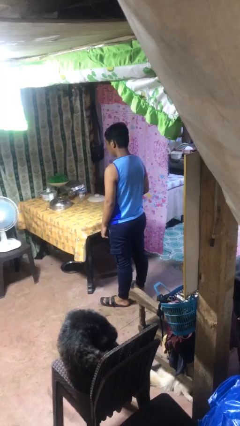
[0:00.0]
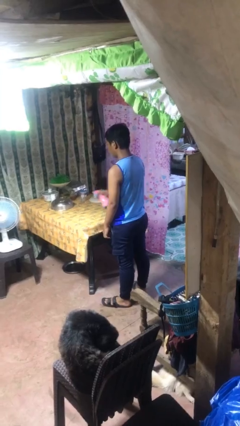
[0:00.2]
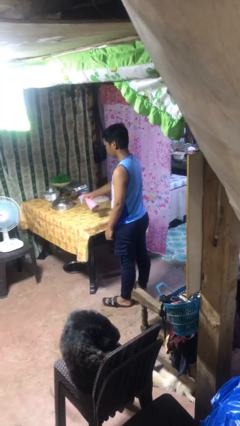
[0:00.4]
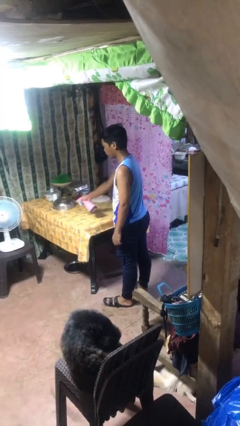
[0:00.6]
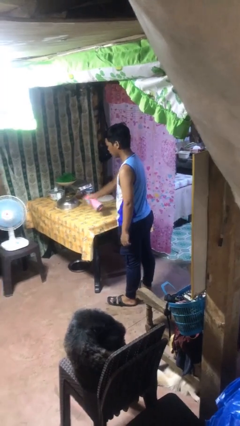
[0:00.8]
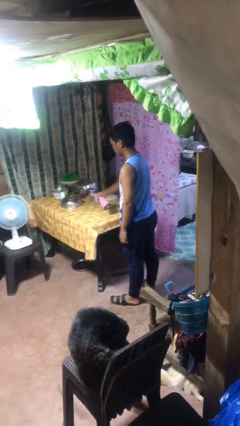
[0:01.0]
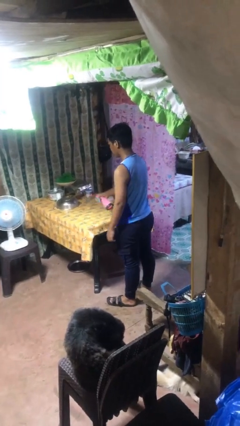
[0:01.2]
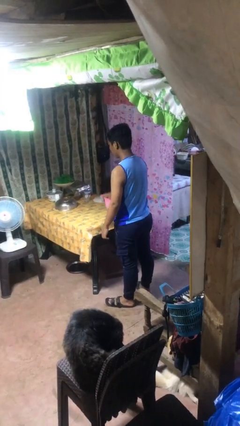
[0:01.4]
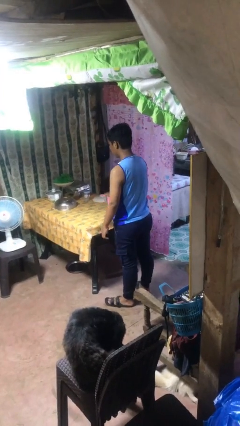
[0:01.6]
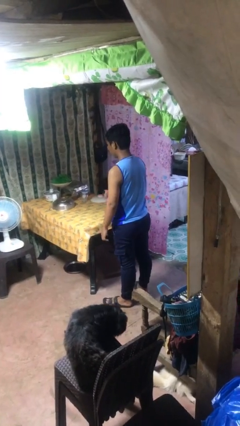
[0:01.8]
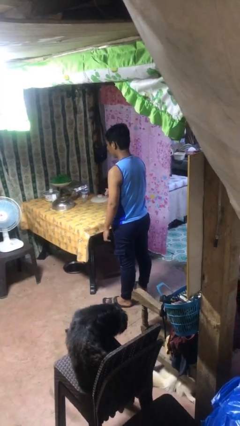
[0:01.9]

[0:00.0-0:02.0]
person sprays from bottle

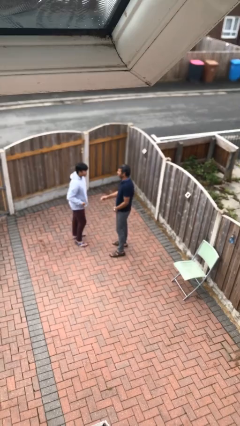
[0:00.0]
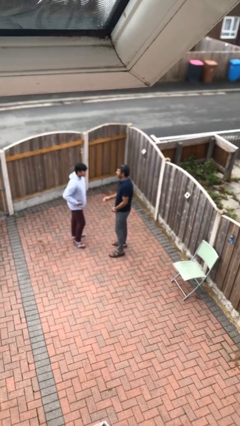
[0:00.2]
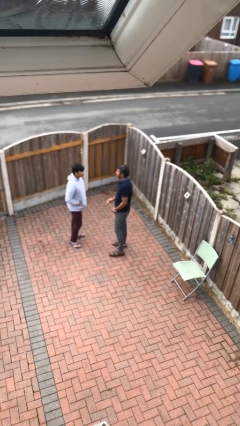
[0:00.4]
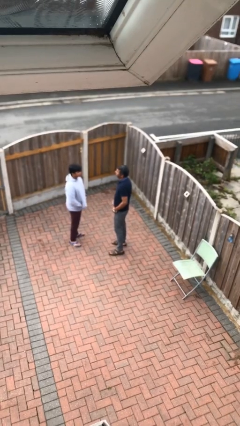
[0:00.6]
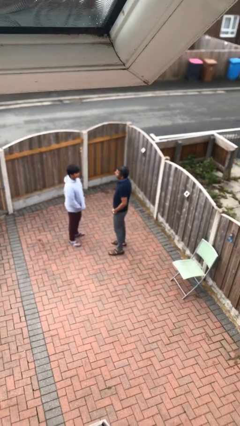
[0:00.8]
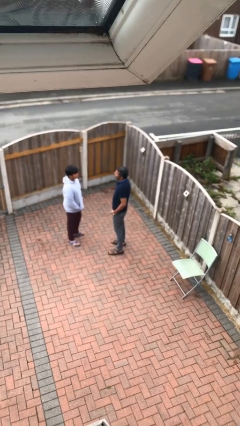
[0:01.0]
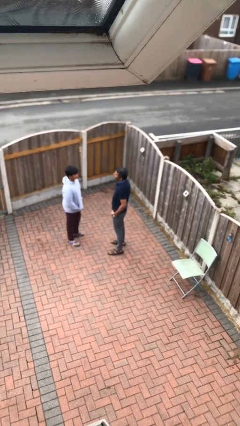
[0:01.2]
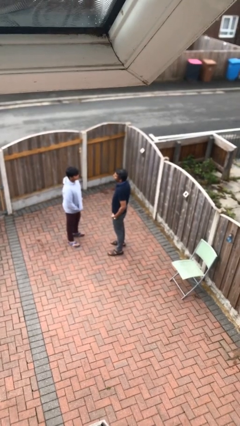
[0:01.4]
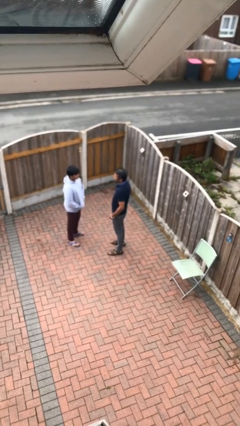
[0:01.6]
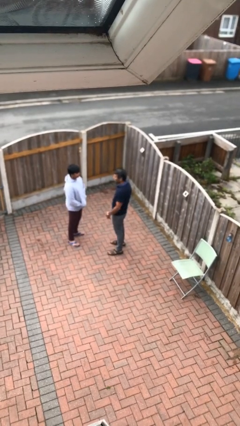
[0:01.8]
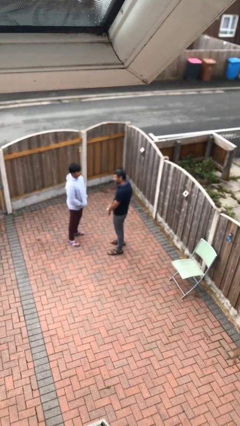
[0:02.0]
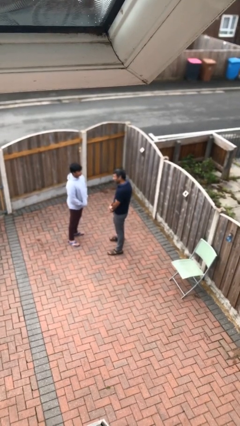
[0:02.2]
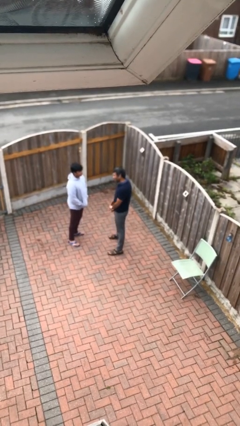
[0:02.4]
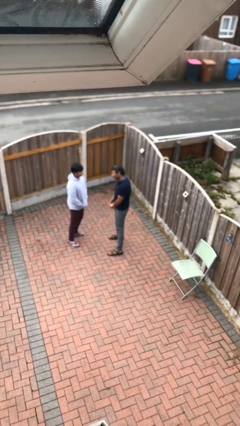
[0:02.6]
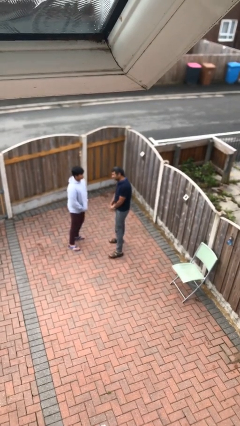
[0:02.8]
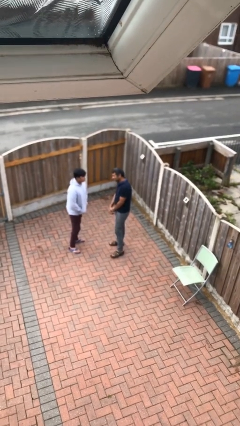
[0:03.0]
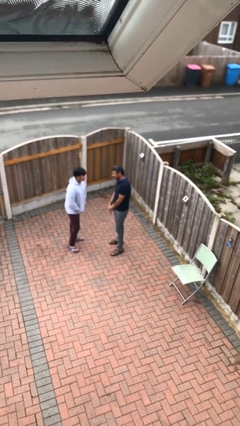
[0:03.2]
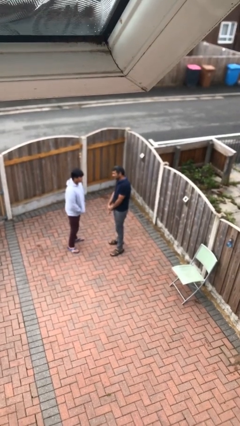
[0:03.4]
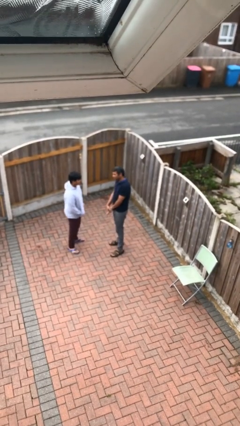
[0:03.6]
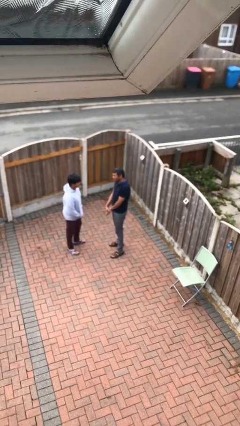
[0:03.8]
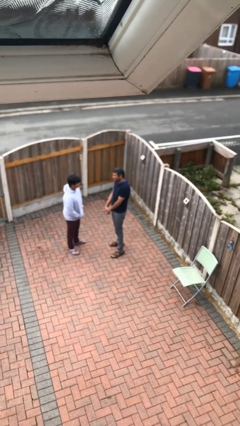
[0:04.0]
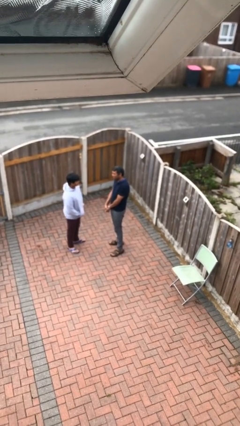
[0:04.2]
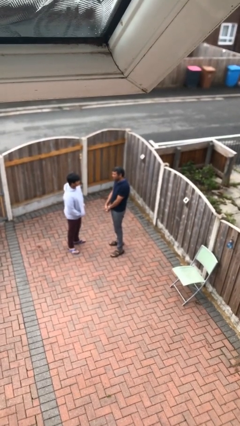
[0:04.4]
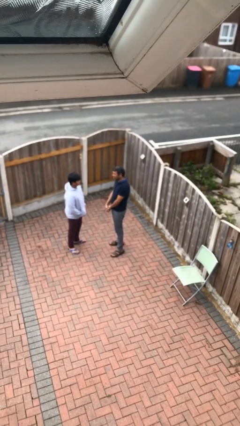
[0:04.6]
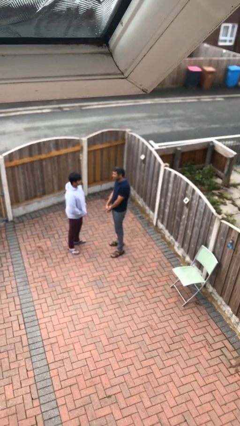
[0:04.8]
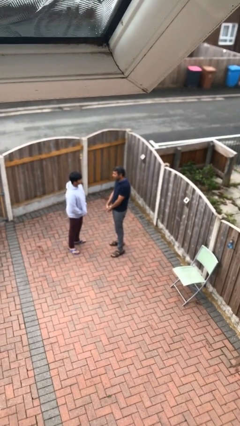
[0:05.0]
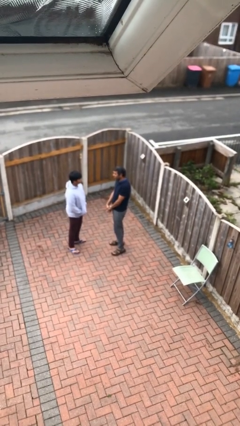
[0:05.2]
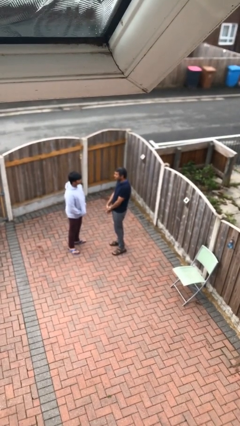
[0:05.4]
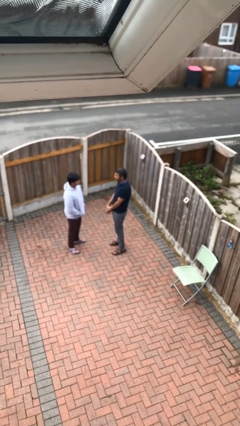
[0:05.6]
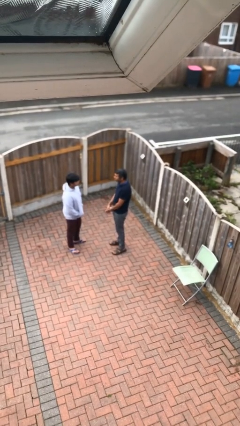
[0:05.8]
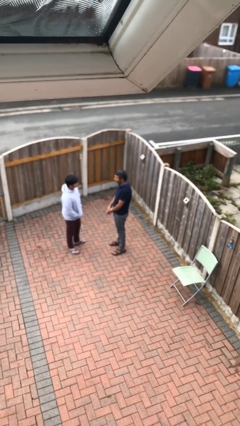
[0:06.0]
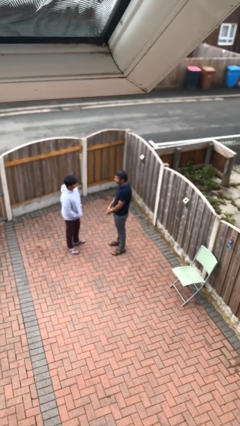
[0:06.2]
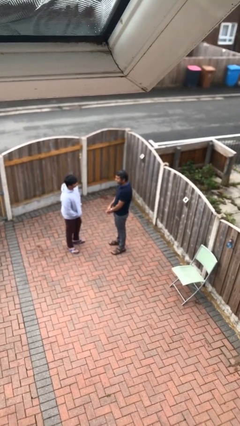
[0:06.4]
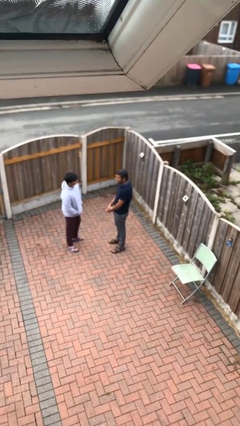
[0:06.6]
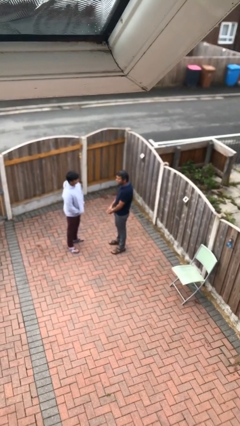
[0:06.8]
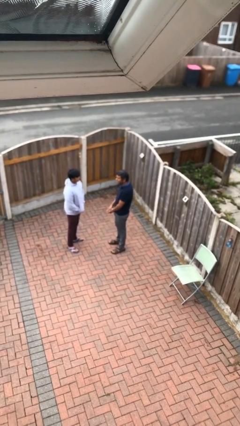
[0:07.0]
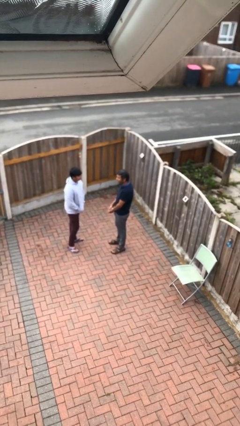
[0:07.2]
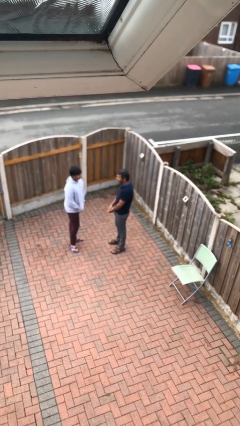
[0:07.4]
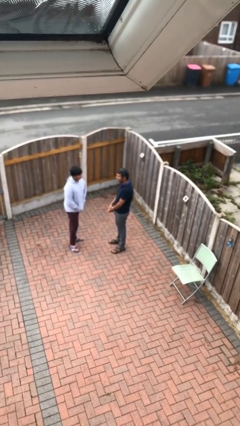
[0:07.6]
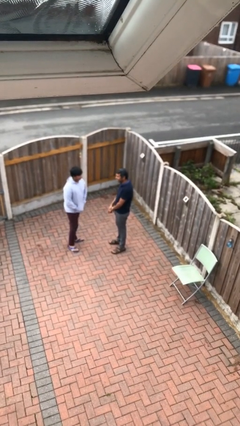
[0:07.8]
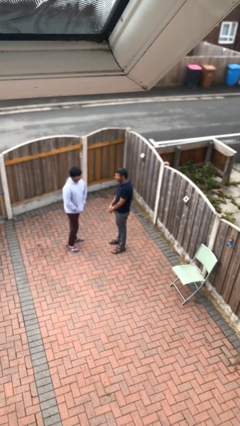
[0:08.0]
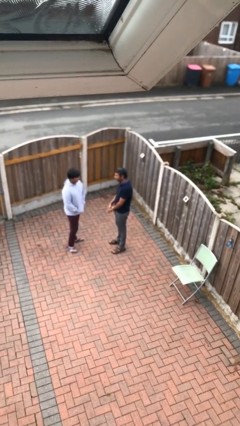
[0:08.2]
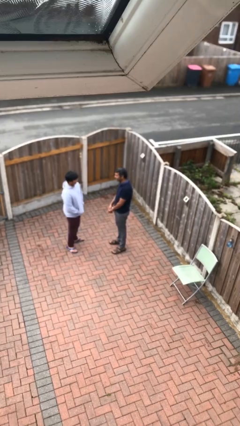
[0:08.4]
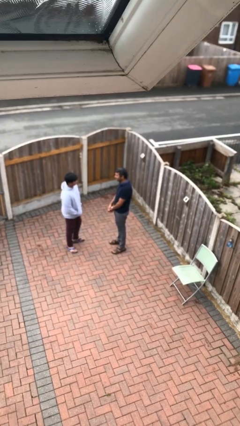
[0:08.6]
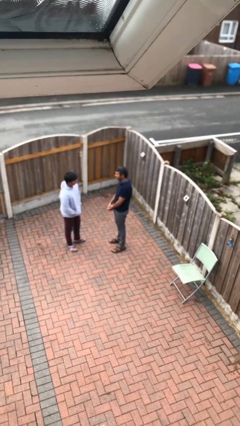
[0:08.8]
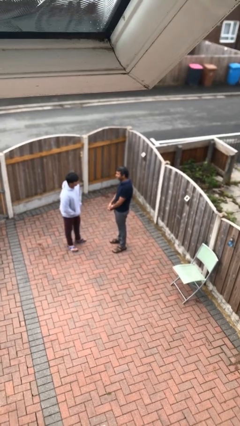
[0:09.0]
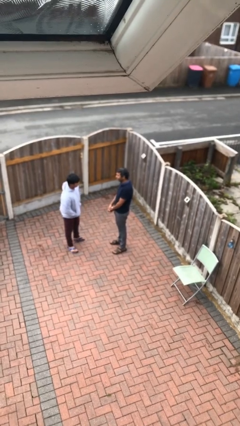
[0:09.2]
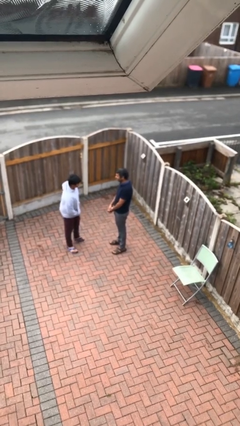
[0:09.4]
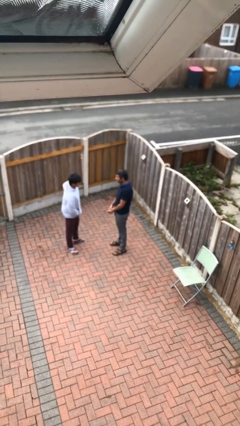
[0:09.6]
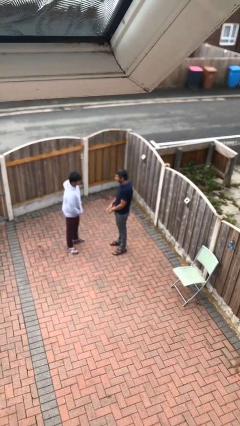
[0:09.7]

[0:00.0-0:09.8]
person talks to person

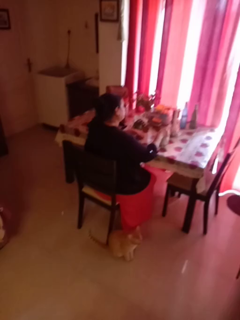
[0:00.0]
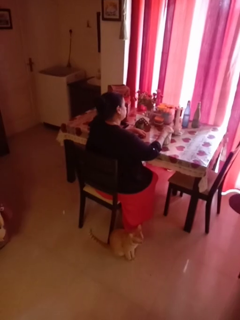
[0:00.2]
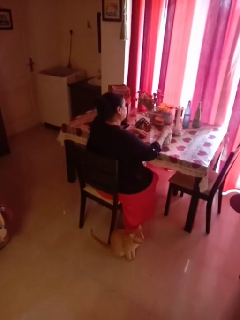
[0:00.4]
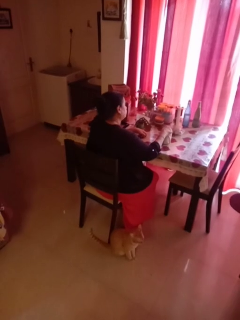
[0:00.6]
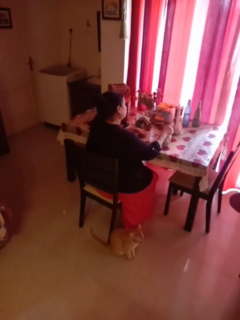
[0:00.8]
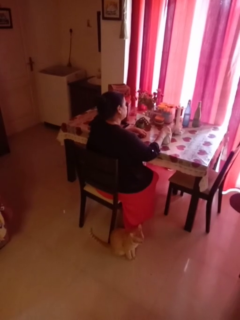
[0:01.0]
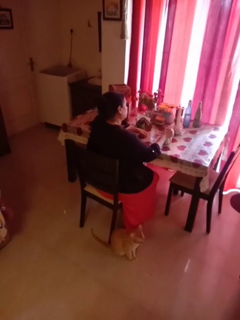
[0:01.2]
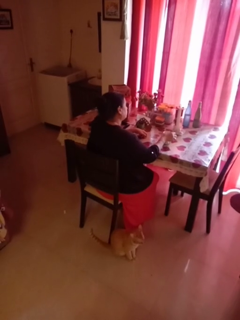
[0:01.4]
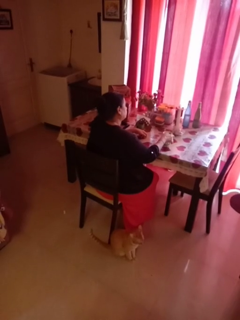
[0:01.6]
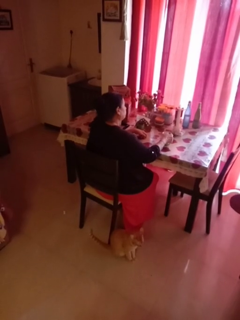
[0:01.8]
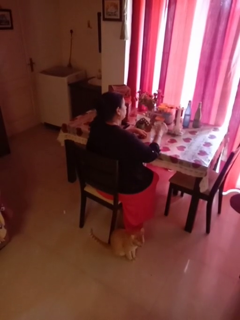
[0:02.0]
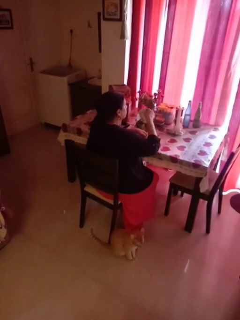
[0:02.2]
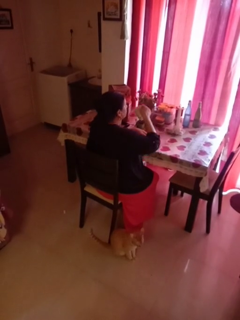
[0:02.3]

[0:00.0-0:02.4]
person stirs mug

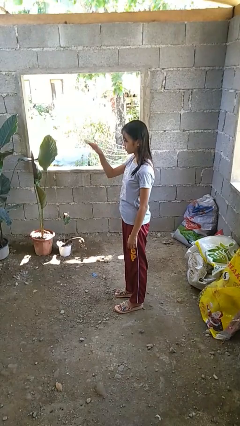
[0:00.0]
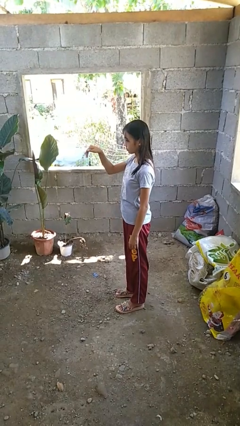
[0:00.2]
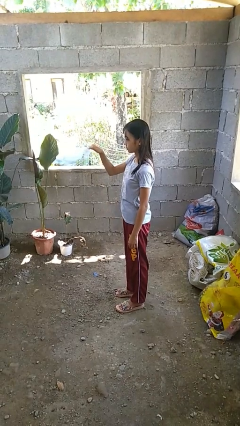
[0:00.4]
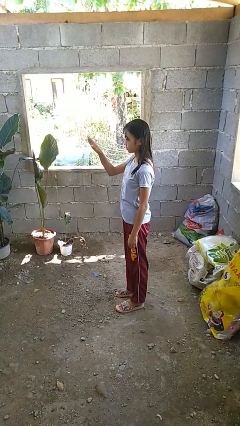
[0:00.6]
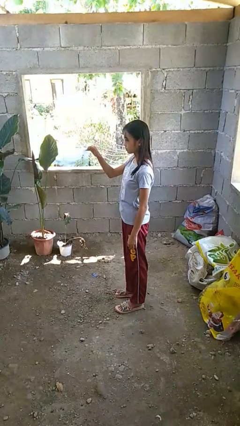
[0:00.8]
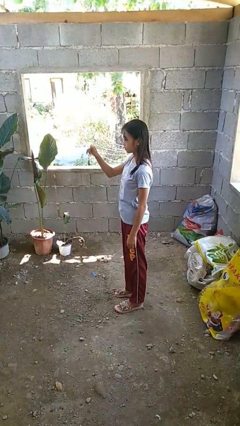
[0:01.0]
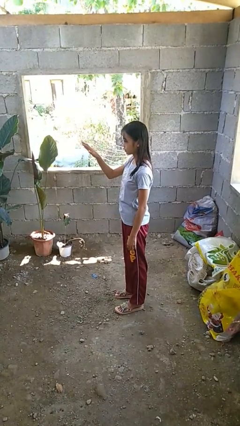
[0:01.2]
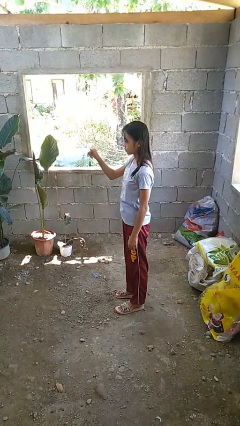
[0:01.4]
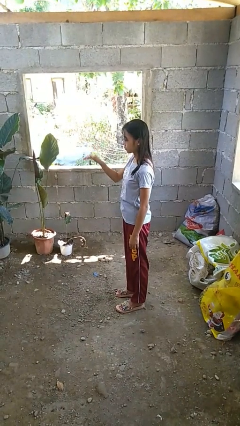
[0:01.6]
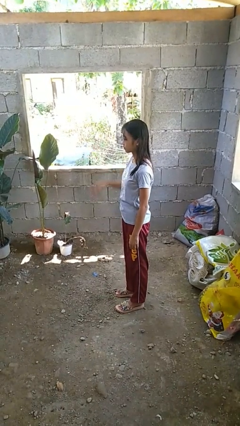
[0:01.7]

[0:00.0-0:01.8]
person gestures come here

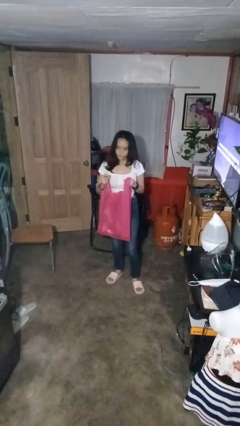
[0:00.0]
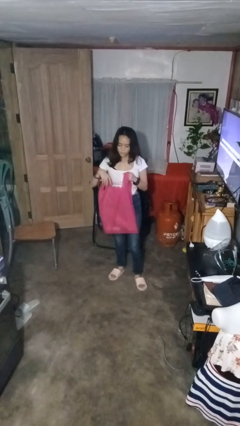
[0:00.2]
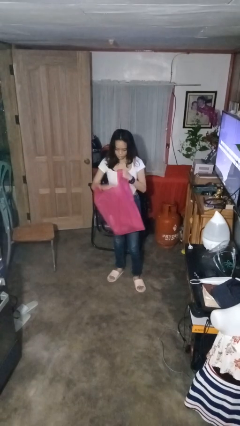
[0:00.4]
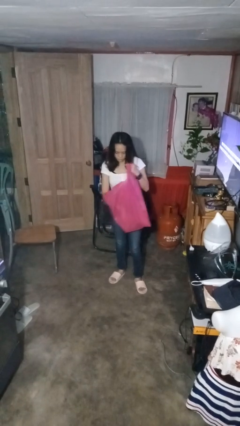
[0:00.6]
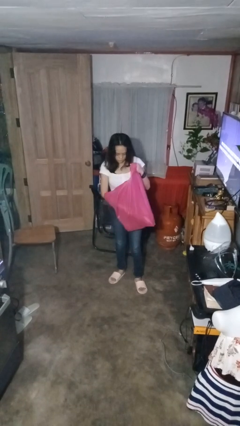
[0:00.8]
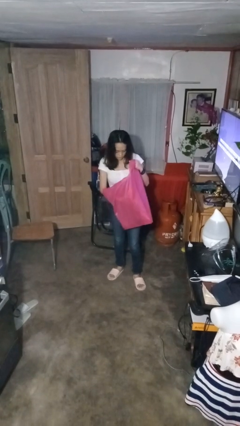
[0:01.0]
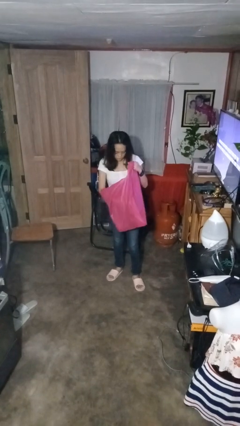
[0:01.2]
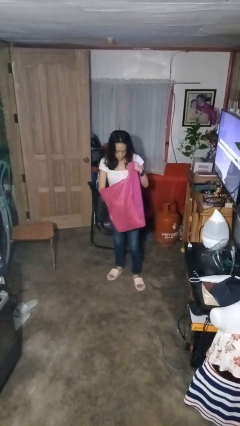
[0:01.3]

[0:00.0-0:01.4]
person searches in bag

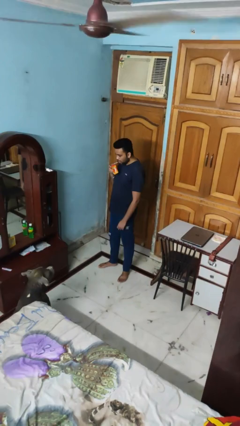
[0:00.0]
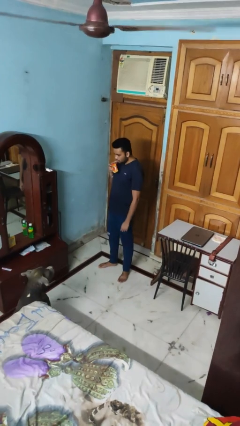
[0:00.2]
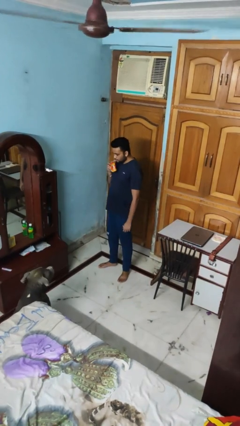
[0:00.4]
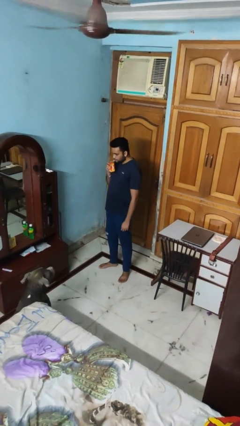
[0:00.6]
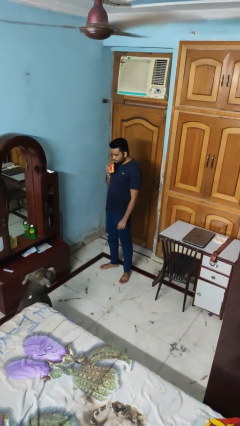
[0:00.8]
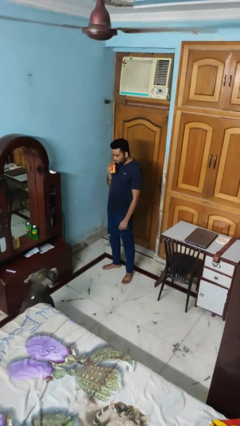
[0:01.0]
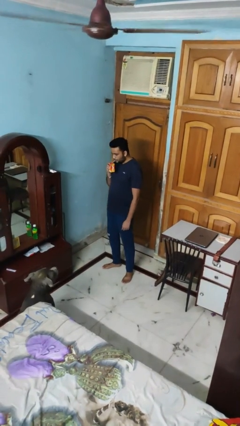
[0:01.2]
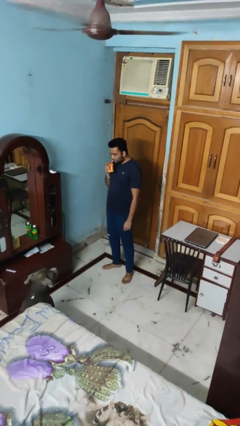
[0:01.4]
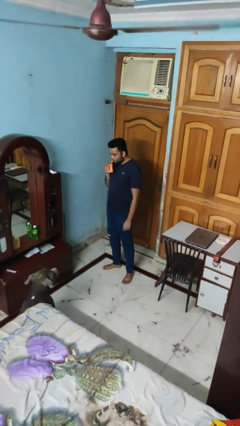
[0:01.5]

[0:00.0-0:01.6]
person drinks from straw
